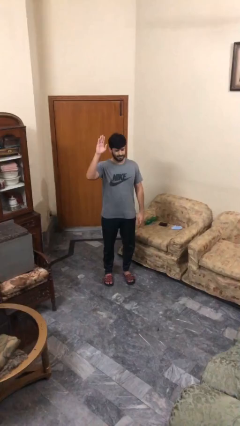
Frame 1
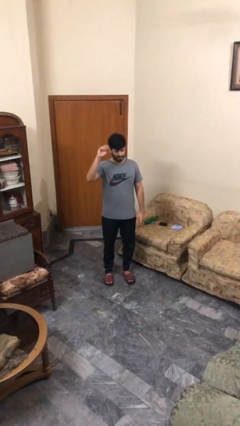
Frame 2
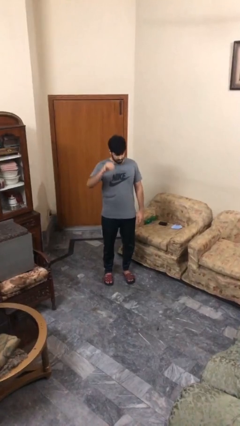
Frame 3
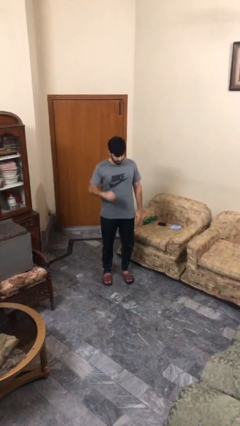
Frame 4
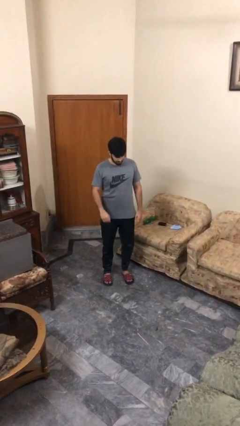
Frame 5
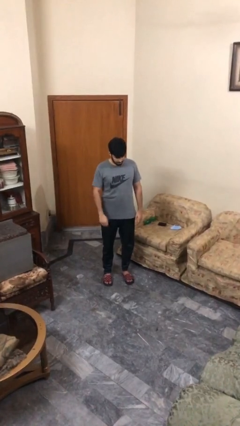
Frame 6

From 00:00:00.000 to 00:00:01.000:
person gestures lower hand

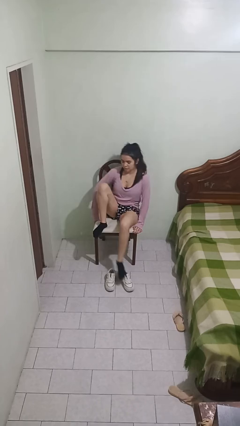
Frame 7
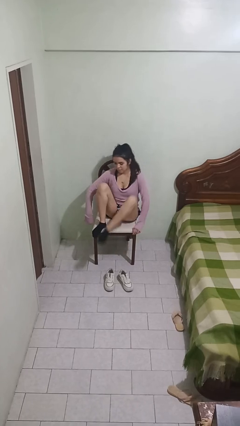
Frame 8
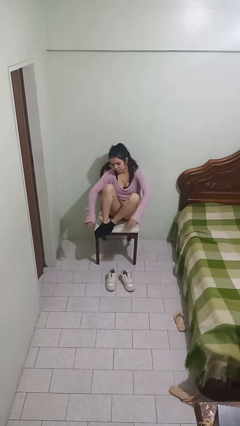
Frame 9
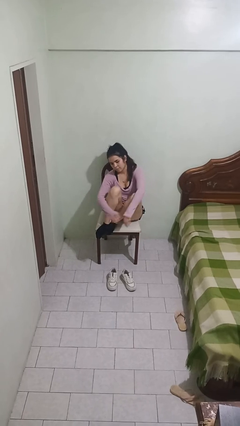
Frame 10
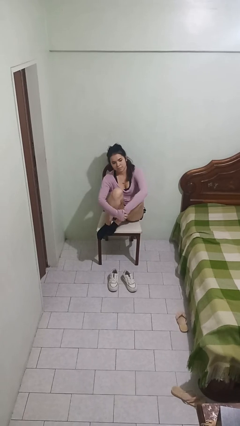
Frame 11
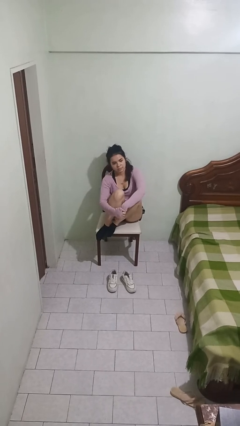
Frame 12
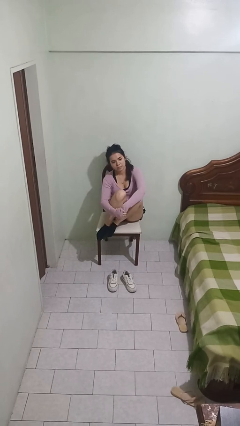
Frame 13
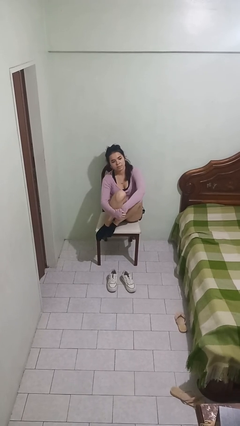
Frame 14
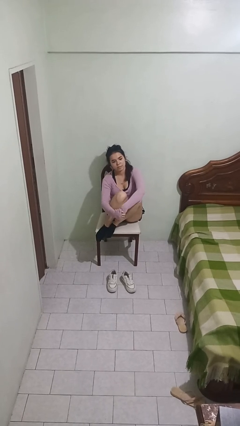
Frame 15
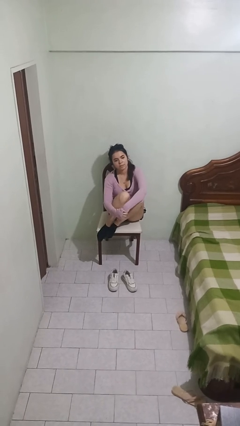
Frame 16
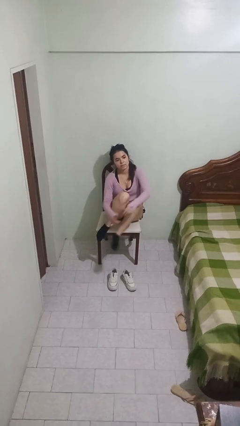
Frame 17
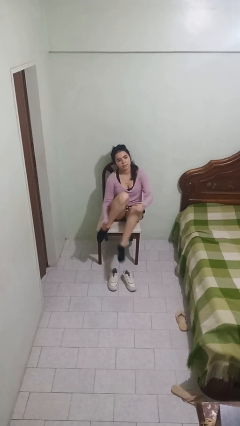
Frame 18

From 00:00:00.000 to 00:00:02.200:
person puts feet up

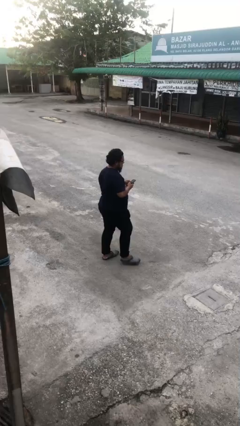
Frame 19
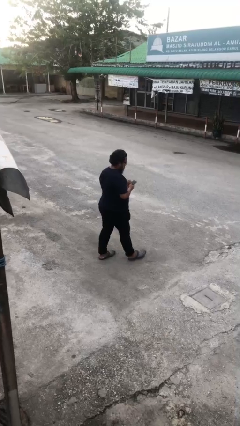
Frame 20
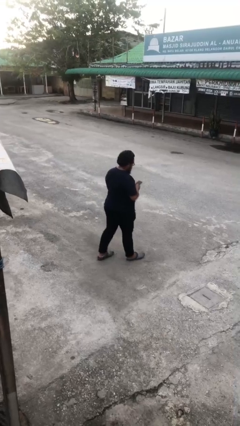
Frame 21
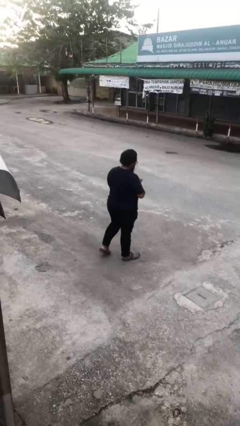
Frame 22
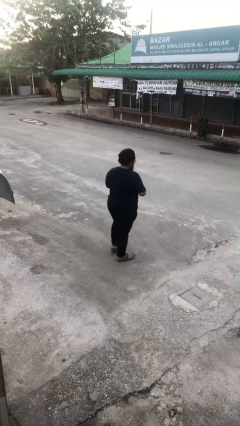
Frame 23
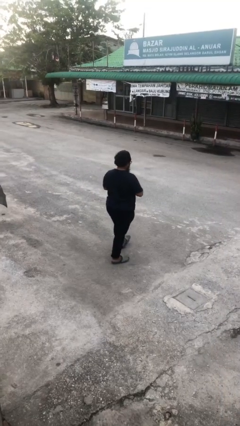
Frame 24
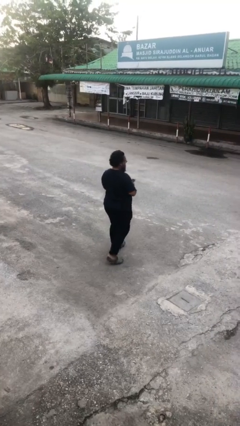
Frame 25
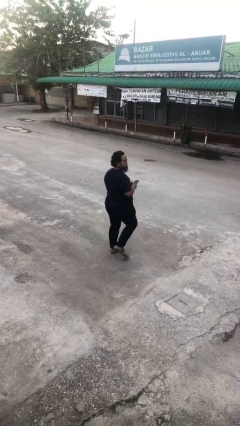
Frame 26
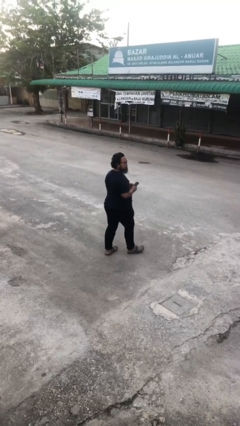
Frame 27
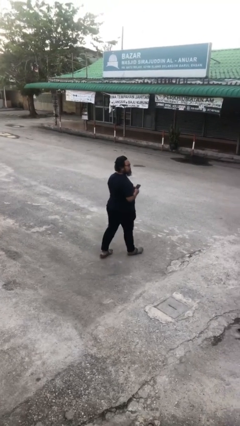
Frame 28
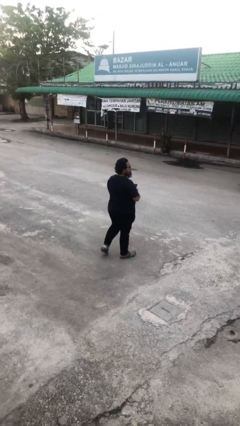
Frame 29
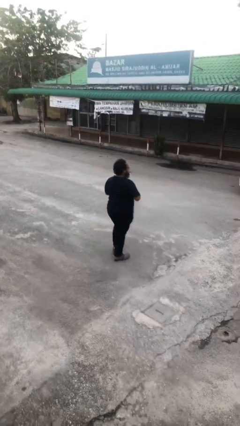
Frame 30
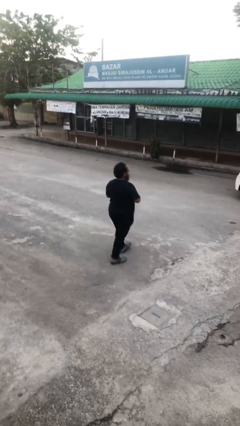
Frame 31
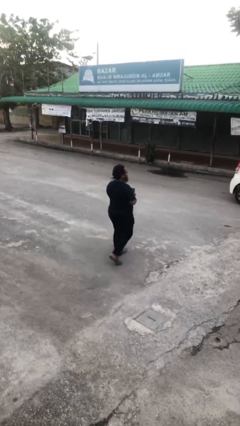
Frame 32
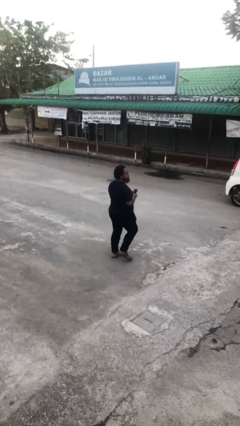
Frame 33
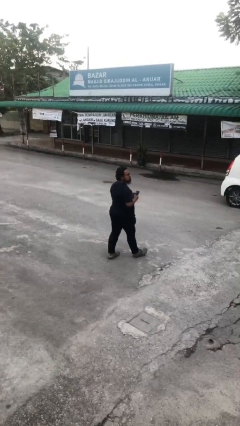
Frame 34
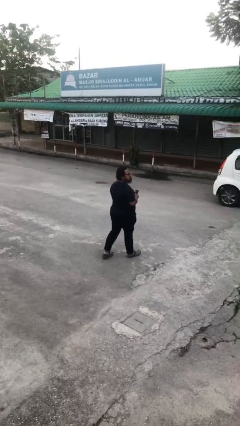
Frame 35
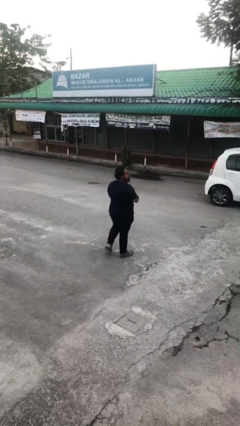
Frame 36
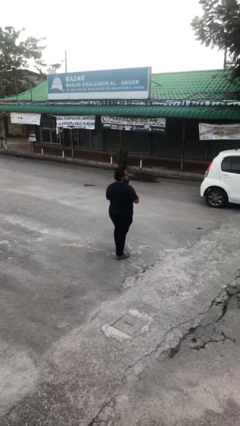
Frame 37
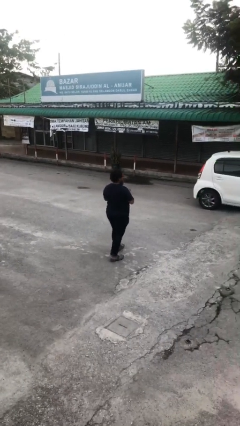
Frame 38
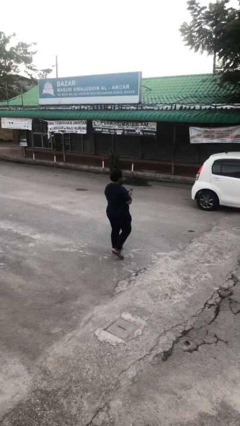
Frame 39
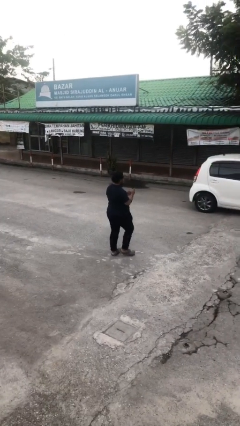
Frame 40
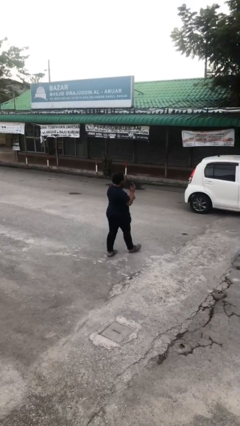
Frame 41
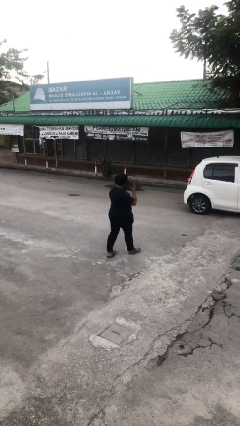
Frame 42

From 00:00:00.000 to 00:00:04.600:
person texts on phone

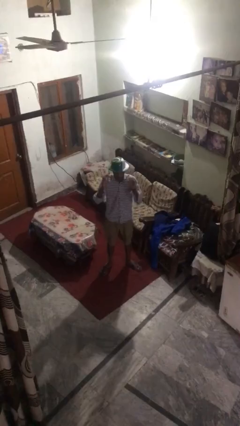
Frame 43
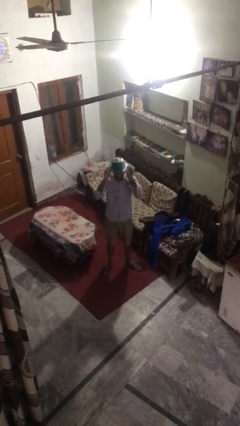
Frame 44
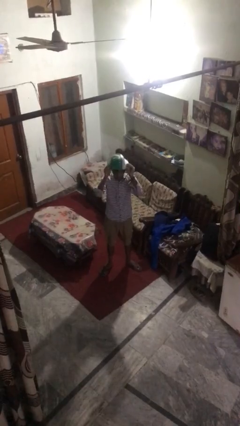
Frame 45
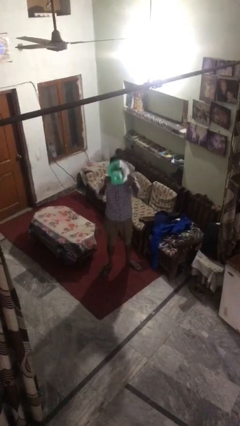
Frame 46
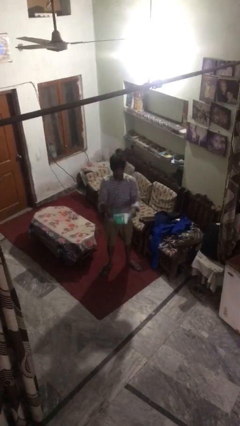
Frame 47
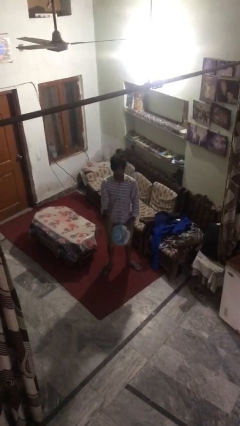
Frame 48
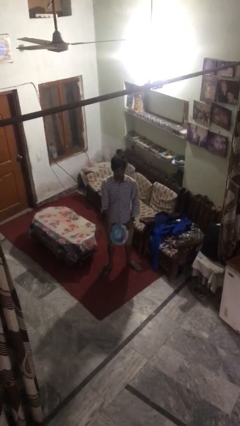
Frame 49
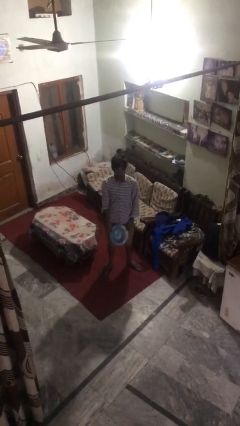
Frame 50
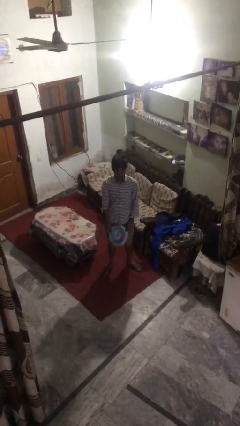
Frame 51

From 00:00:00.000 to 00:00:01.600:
person takes off hat

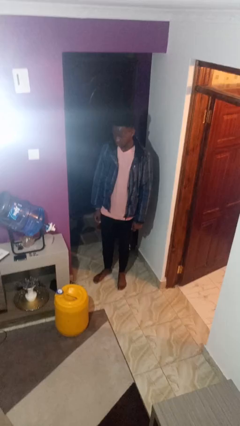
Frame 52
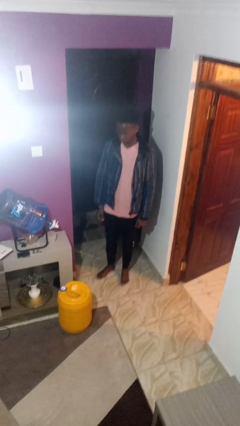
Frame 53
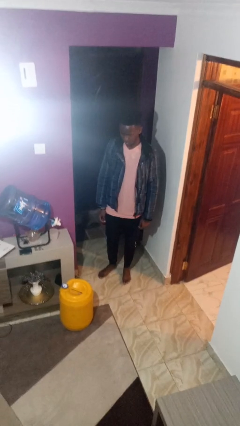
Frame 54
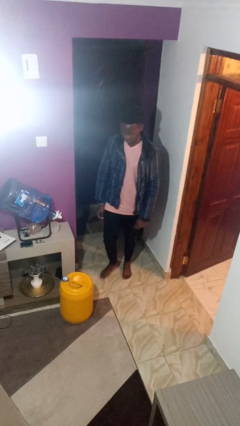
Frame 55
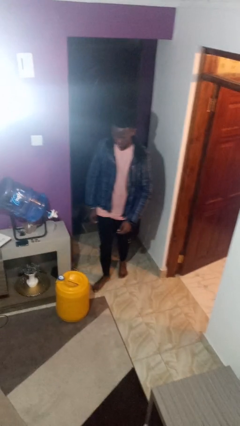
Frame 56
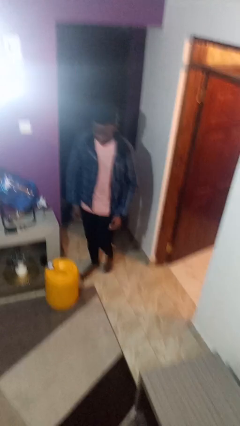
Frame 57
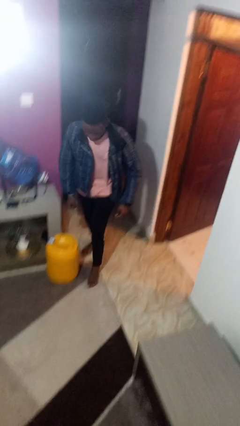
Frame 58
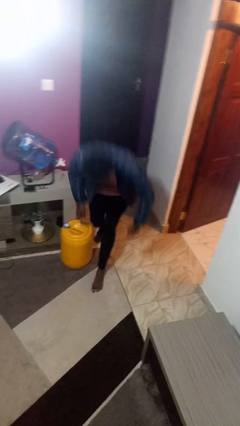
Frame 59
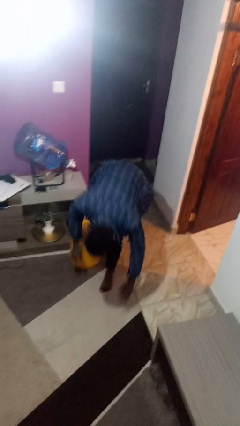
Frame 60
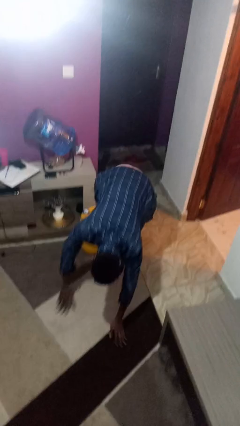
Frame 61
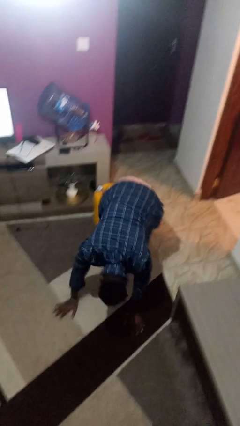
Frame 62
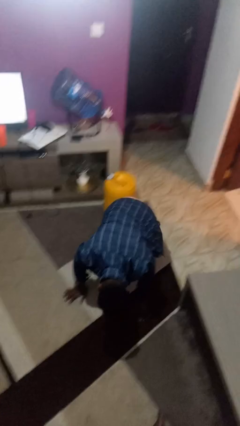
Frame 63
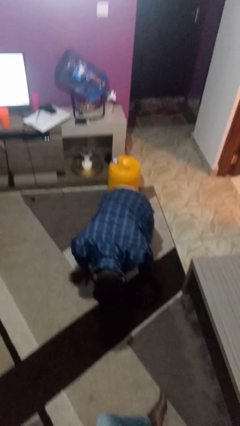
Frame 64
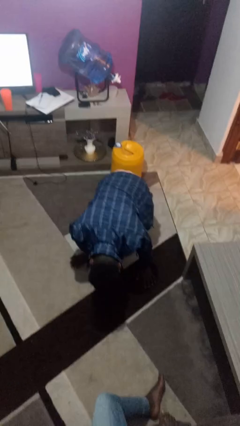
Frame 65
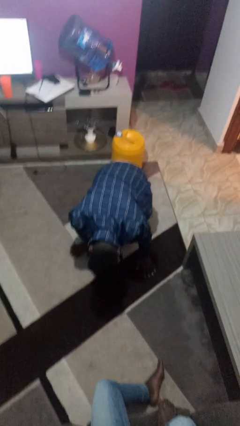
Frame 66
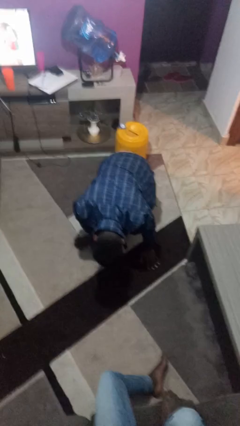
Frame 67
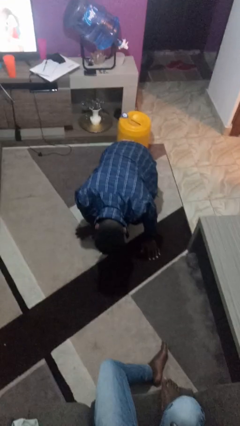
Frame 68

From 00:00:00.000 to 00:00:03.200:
person trips on object on floor

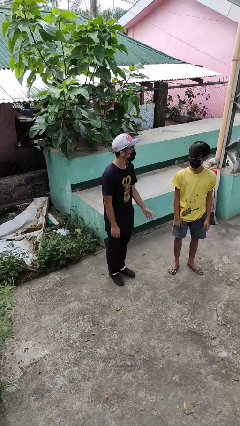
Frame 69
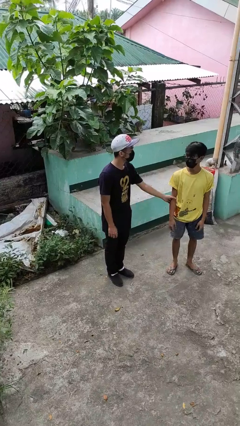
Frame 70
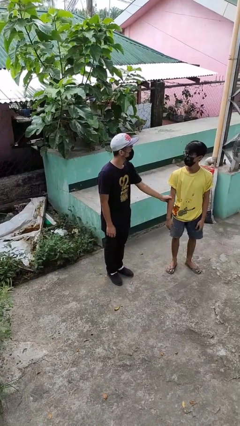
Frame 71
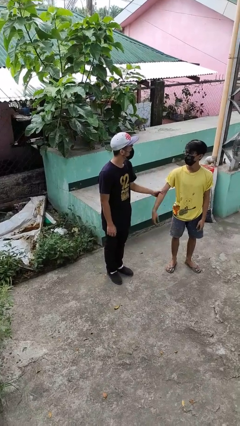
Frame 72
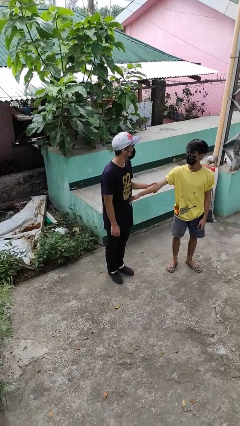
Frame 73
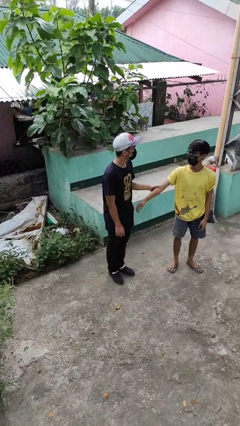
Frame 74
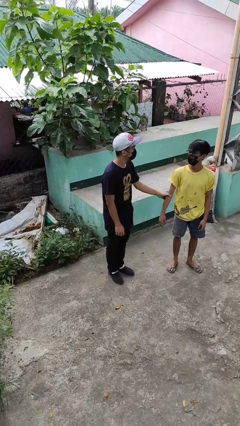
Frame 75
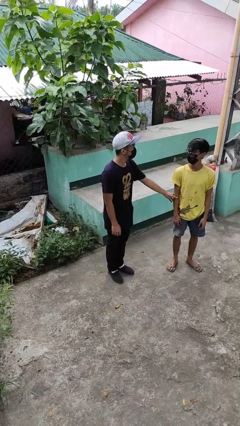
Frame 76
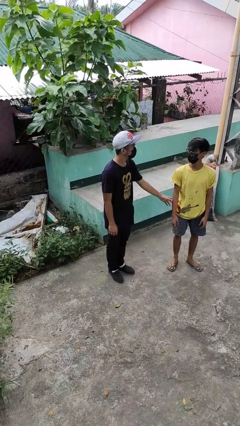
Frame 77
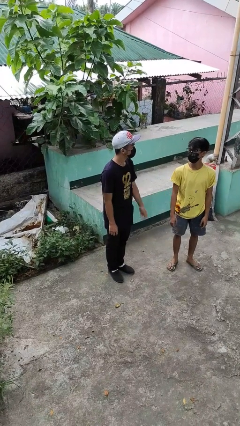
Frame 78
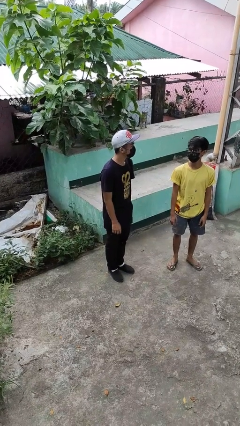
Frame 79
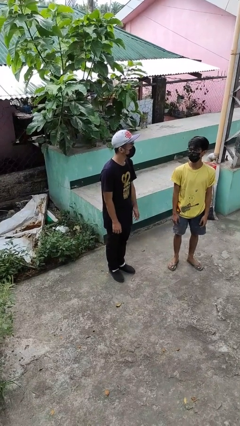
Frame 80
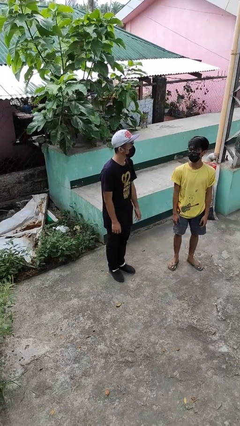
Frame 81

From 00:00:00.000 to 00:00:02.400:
person grabs person by forearm

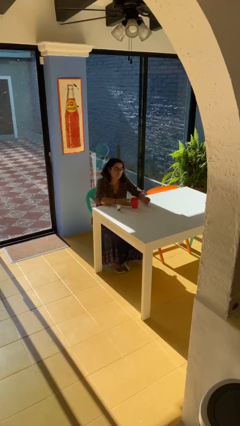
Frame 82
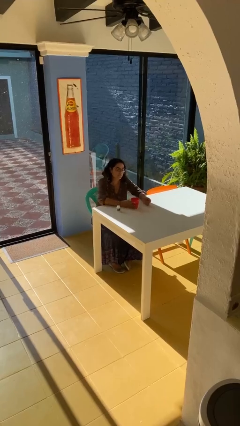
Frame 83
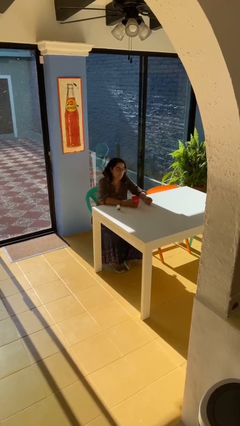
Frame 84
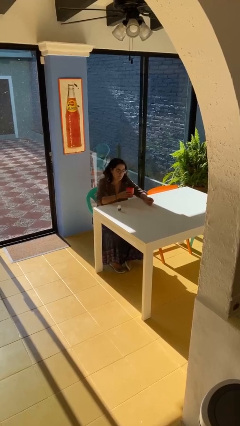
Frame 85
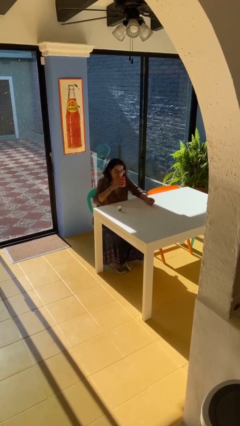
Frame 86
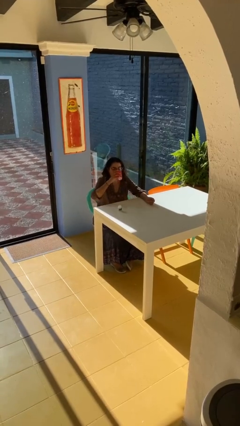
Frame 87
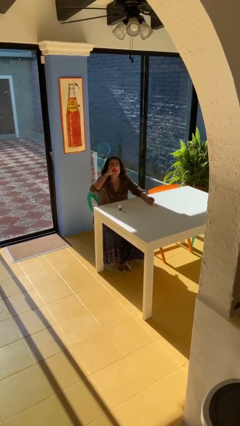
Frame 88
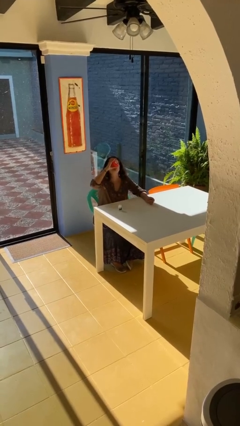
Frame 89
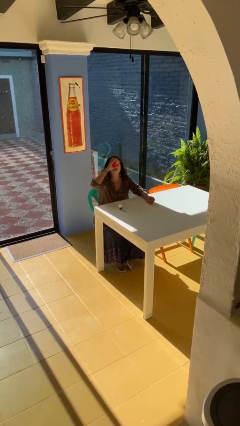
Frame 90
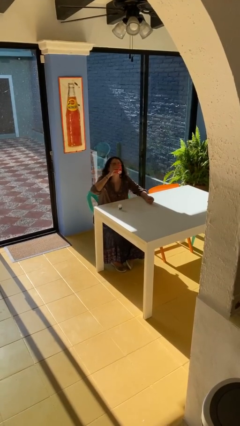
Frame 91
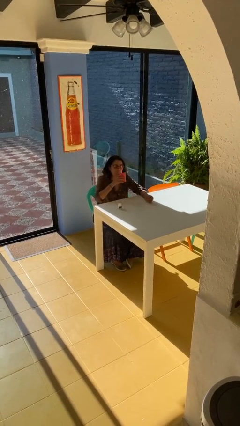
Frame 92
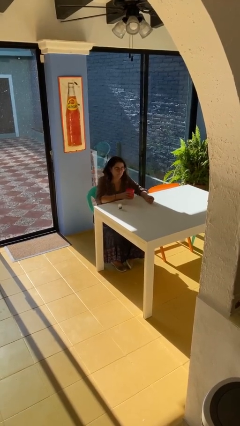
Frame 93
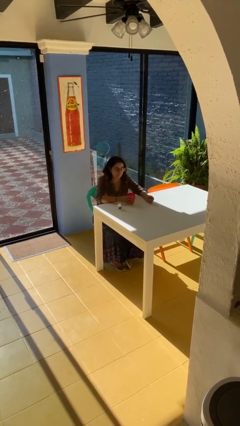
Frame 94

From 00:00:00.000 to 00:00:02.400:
person drinks from cup
